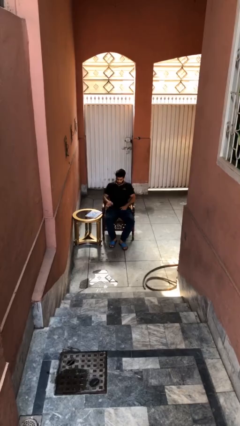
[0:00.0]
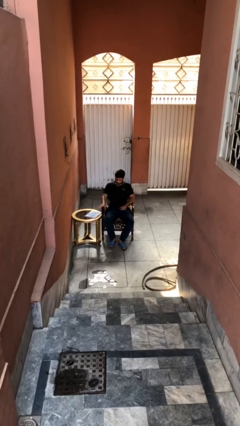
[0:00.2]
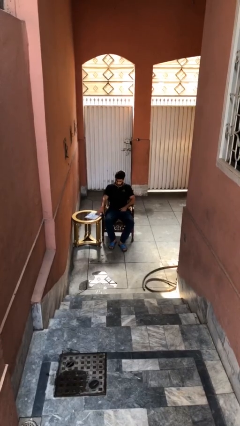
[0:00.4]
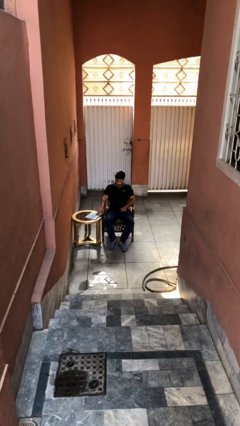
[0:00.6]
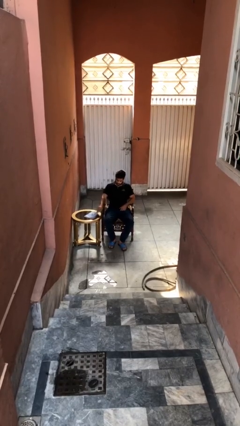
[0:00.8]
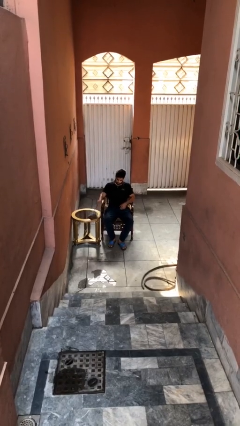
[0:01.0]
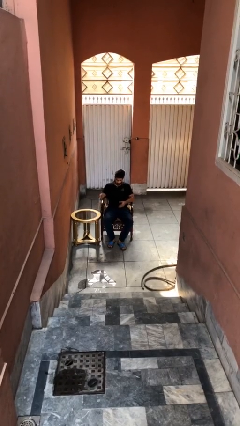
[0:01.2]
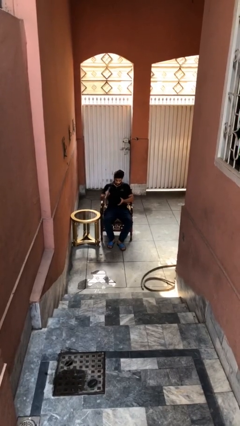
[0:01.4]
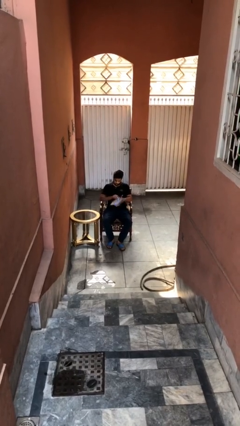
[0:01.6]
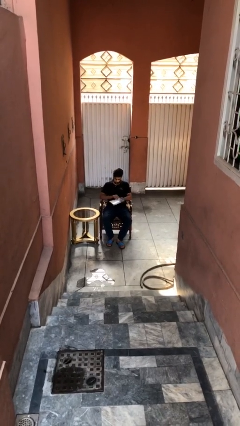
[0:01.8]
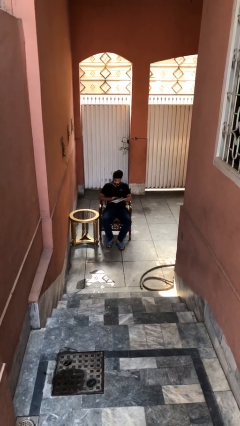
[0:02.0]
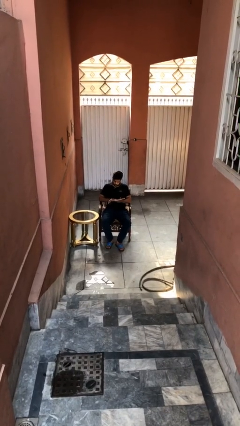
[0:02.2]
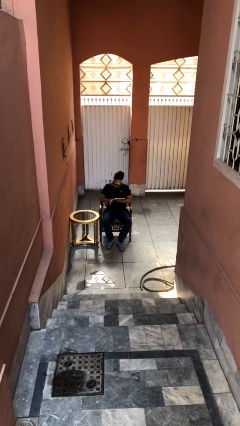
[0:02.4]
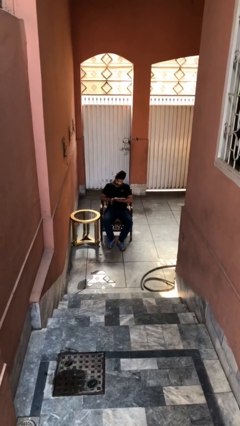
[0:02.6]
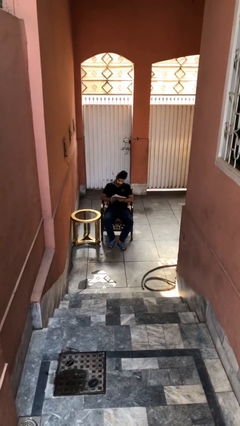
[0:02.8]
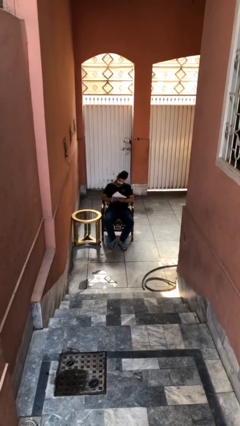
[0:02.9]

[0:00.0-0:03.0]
person picks up object from table

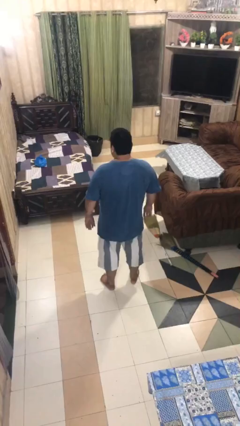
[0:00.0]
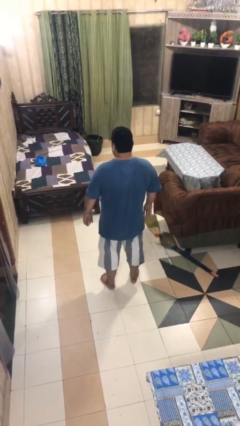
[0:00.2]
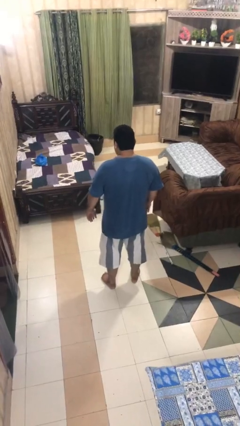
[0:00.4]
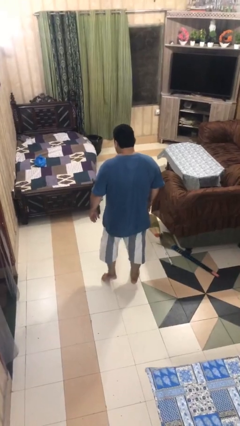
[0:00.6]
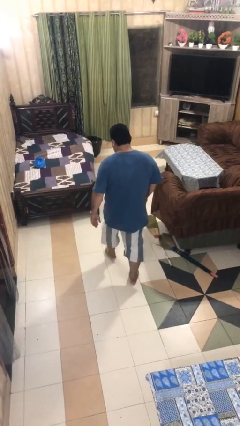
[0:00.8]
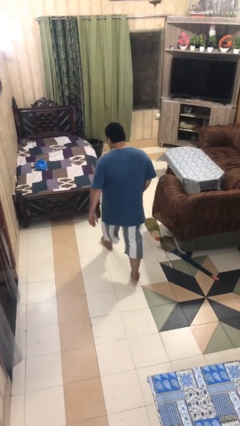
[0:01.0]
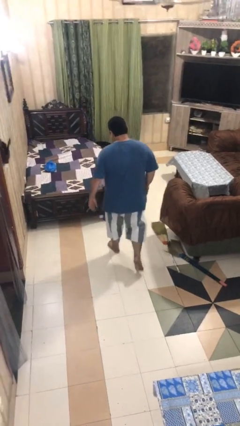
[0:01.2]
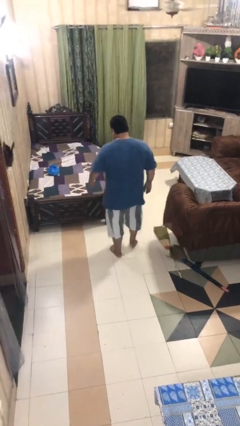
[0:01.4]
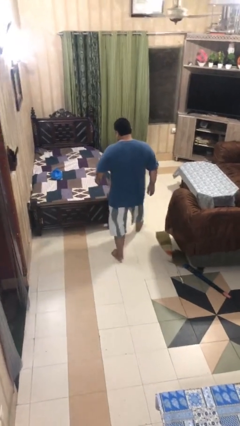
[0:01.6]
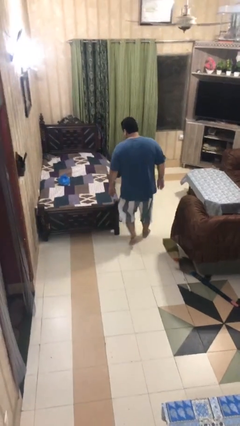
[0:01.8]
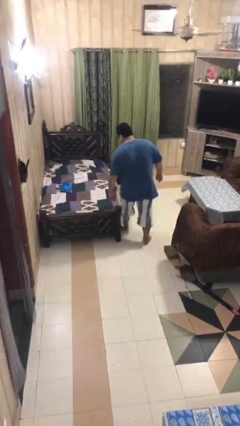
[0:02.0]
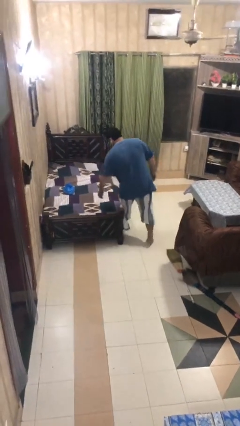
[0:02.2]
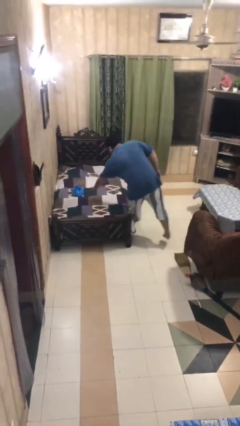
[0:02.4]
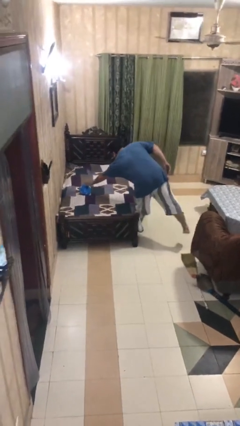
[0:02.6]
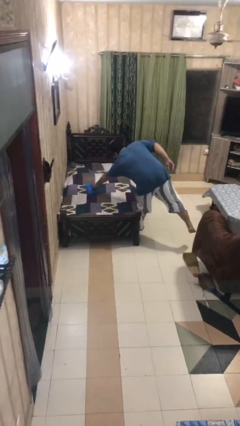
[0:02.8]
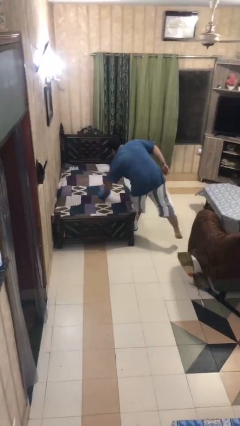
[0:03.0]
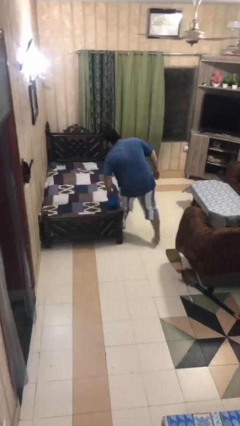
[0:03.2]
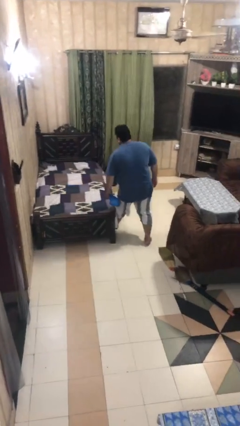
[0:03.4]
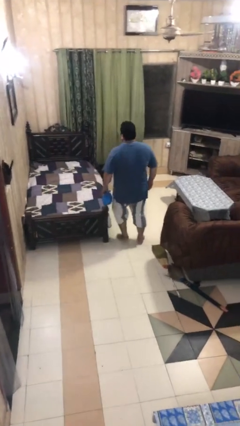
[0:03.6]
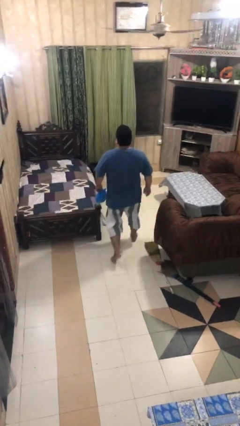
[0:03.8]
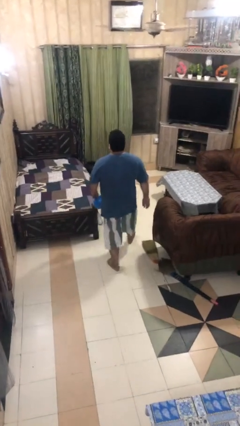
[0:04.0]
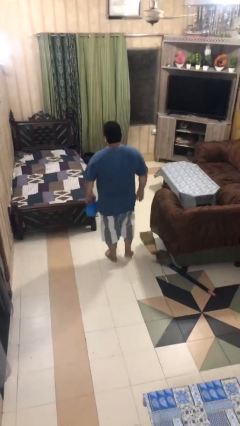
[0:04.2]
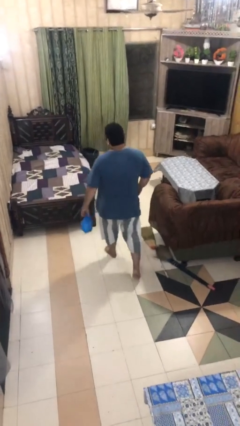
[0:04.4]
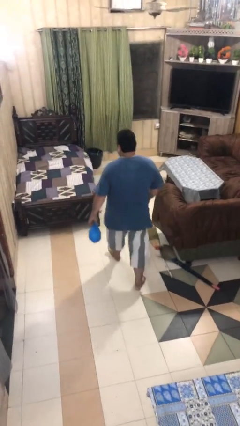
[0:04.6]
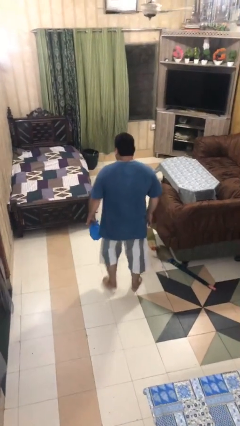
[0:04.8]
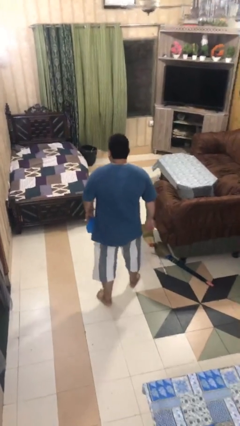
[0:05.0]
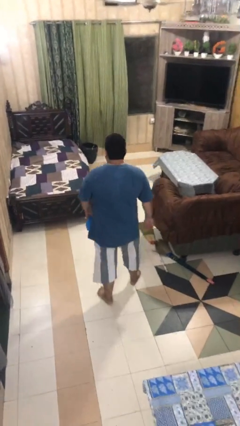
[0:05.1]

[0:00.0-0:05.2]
person picks up object from bed

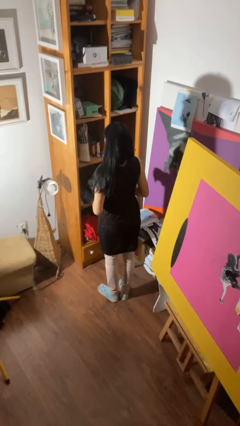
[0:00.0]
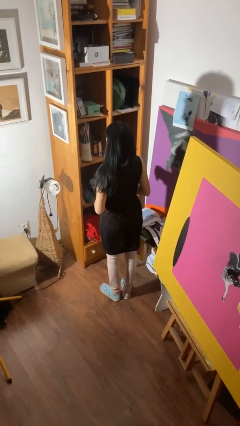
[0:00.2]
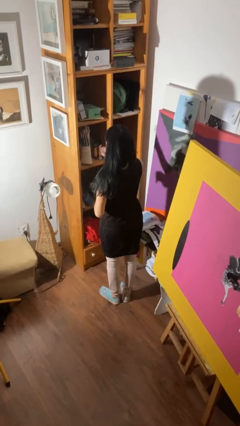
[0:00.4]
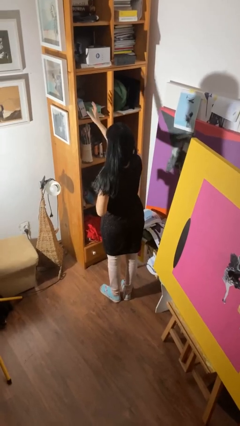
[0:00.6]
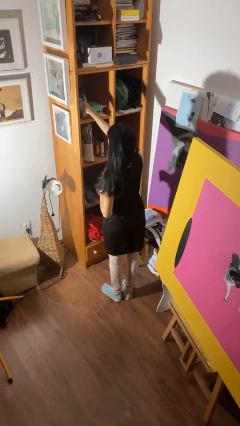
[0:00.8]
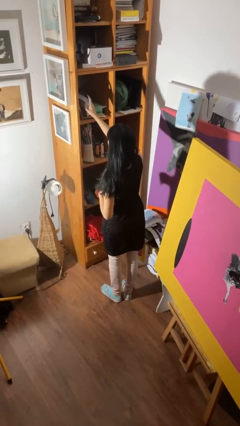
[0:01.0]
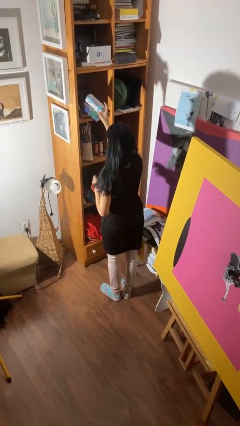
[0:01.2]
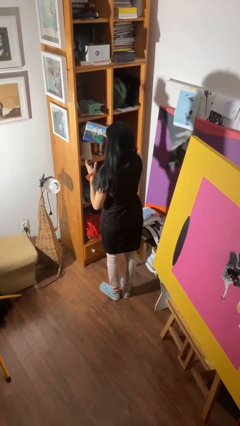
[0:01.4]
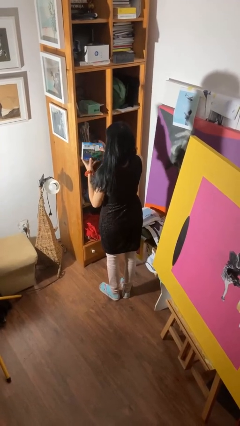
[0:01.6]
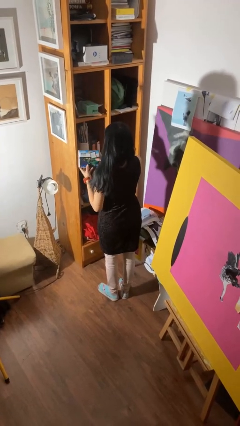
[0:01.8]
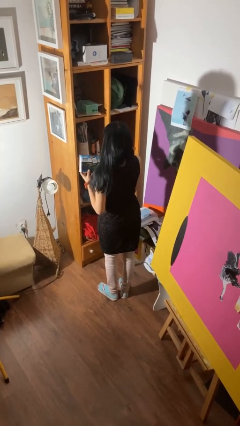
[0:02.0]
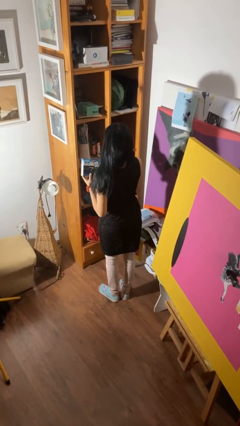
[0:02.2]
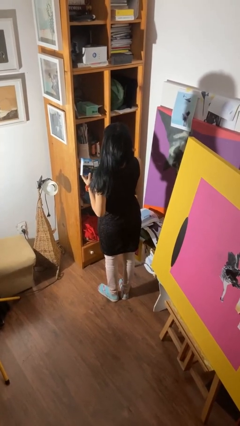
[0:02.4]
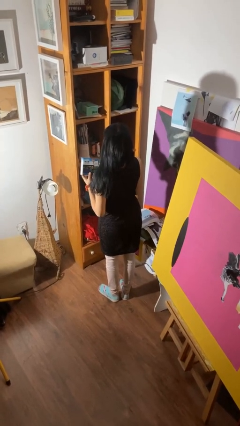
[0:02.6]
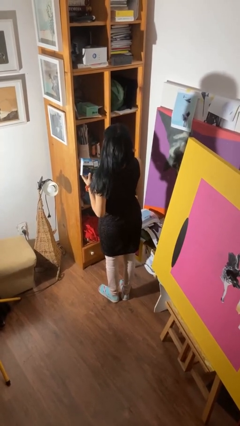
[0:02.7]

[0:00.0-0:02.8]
person picks up object from shelf

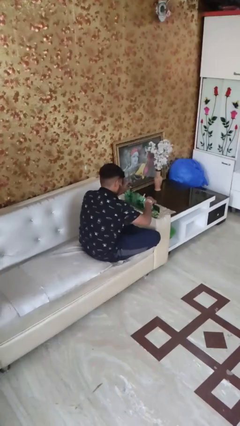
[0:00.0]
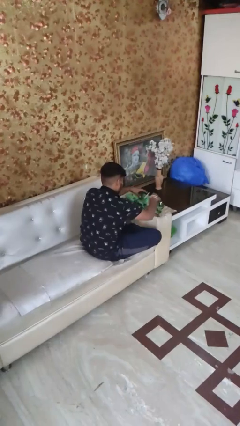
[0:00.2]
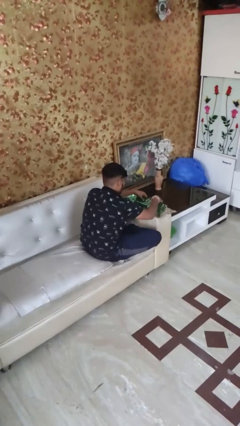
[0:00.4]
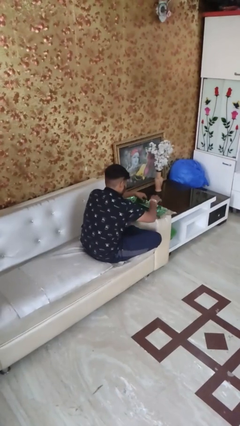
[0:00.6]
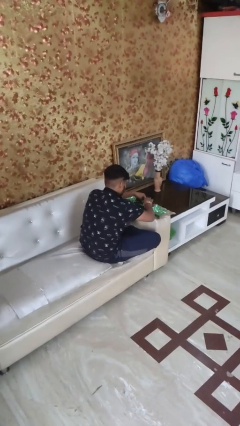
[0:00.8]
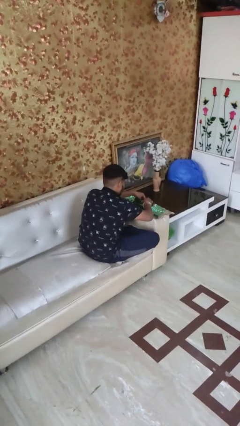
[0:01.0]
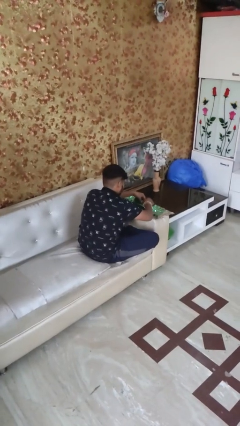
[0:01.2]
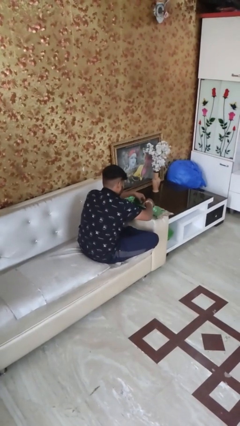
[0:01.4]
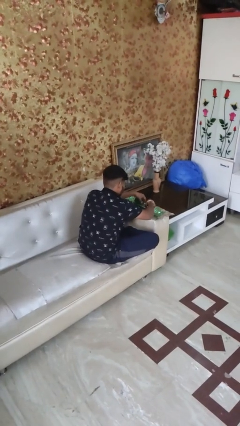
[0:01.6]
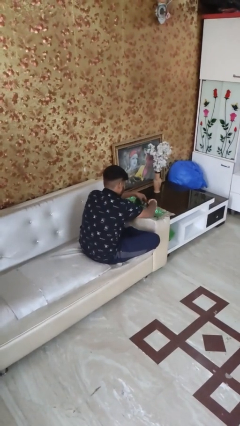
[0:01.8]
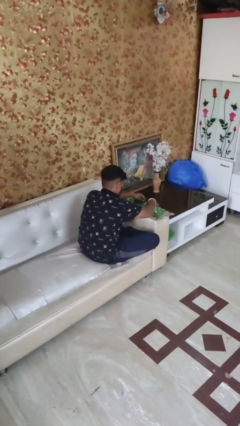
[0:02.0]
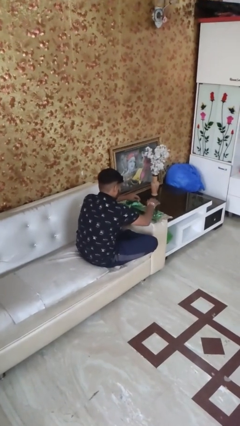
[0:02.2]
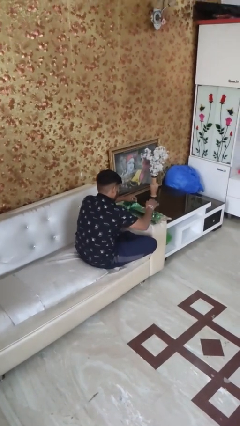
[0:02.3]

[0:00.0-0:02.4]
person wraps box

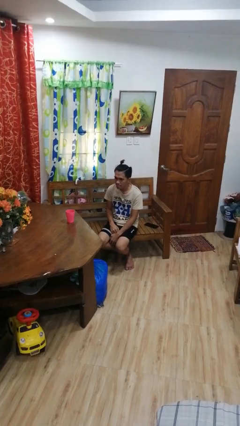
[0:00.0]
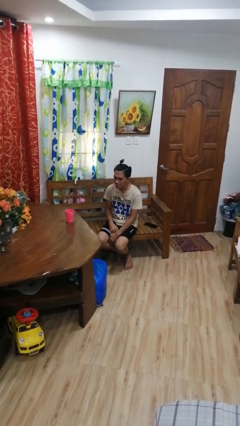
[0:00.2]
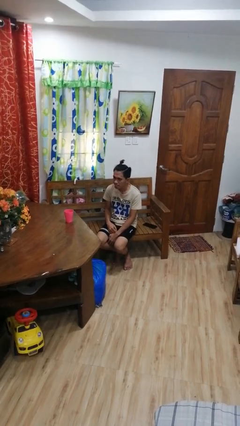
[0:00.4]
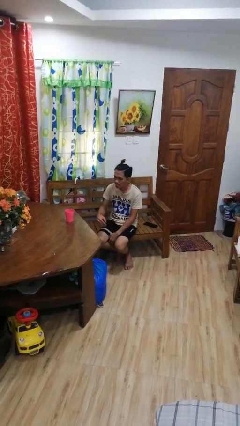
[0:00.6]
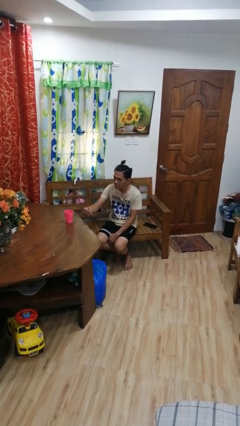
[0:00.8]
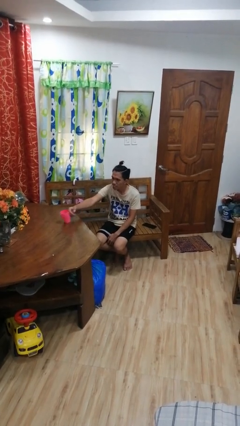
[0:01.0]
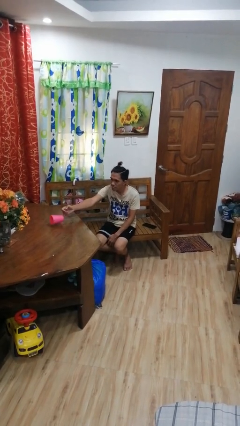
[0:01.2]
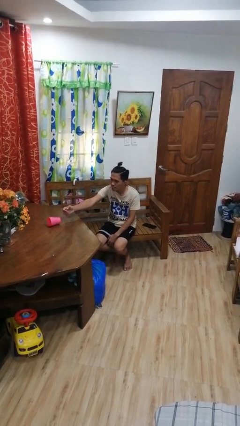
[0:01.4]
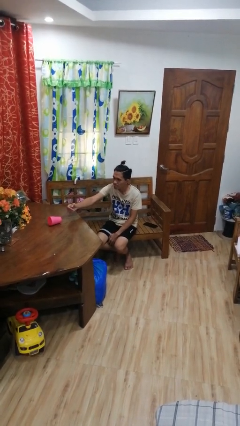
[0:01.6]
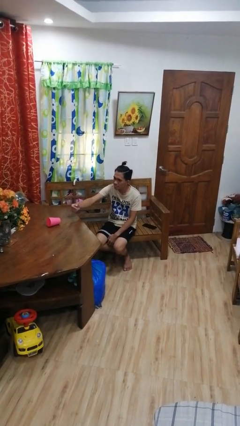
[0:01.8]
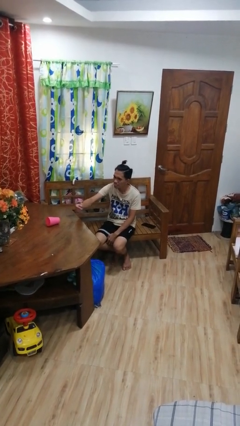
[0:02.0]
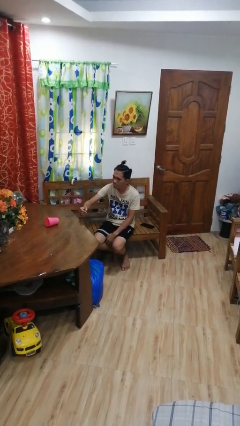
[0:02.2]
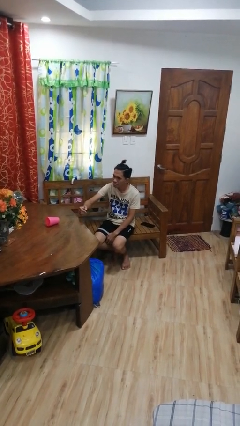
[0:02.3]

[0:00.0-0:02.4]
person knocks over glass

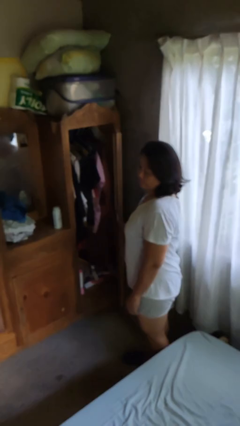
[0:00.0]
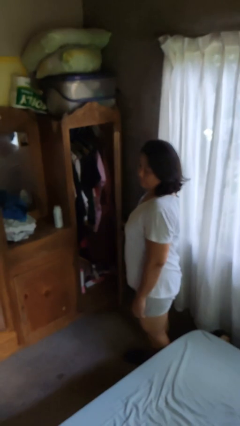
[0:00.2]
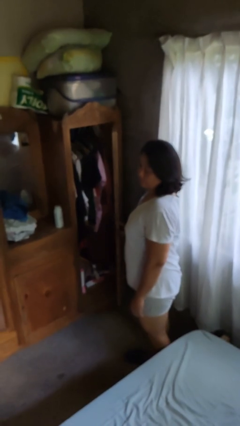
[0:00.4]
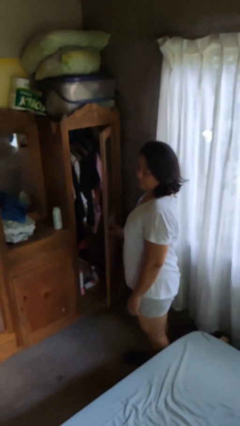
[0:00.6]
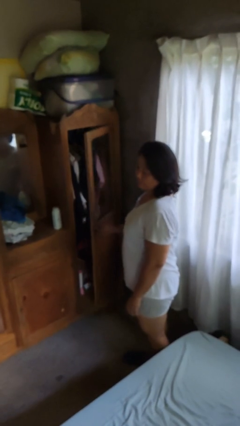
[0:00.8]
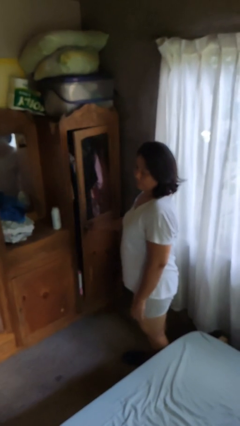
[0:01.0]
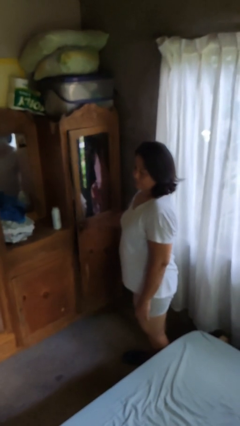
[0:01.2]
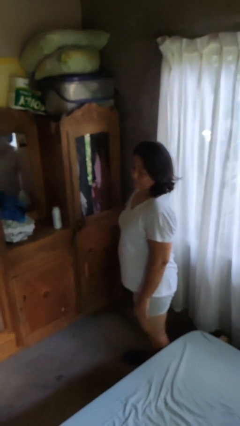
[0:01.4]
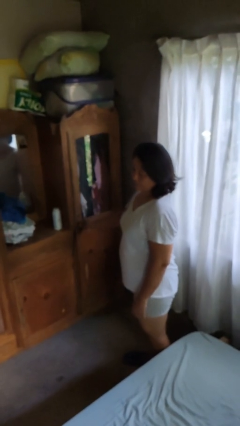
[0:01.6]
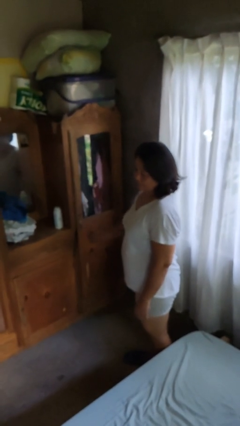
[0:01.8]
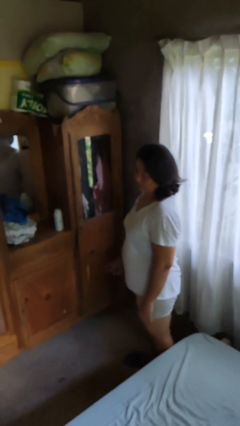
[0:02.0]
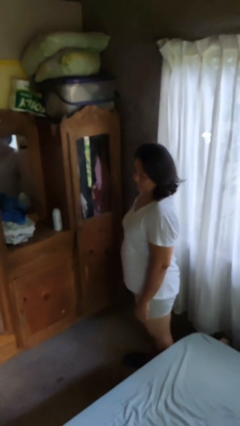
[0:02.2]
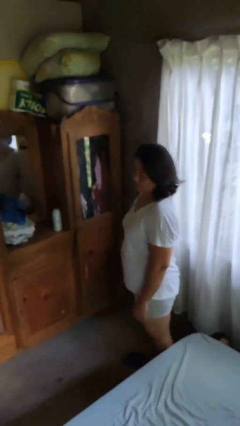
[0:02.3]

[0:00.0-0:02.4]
person closes dresser drawer
